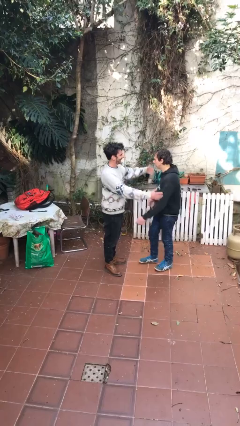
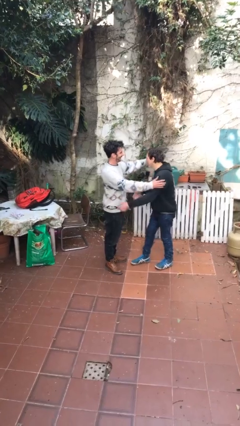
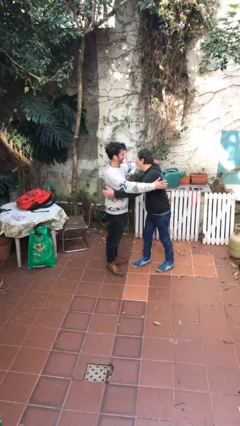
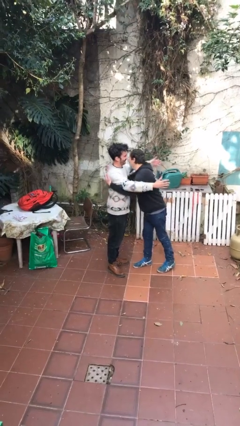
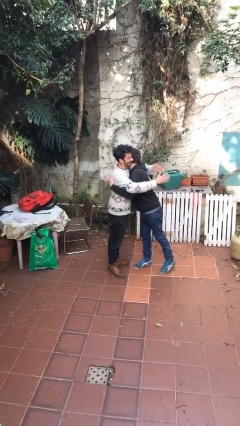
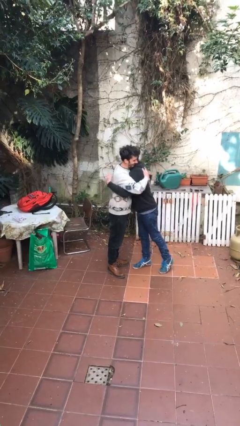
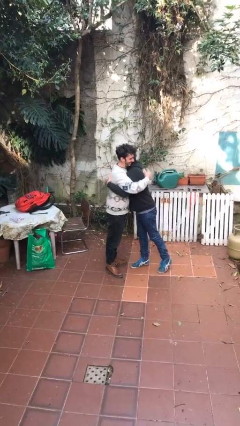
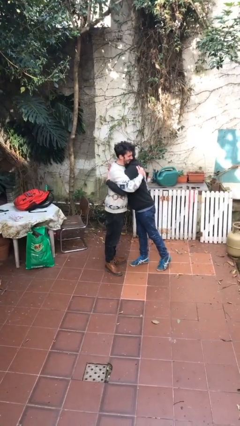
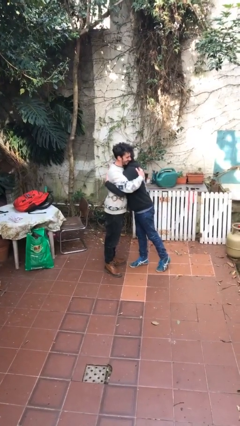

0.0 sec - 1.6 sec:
person embraces person

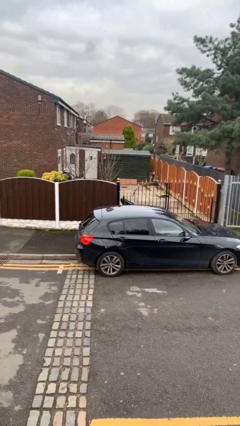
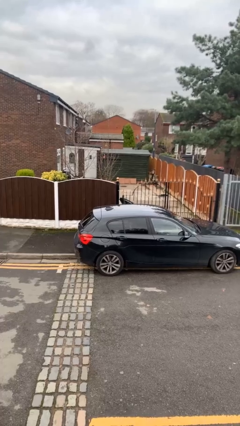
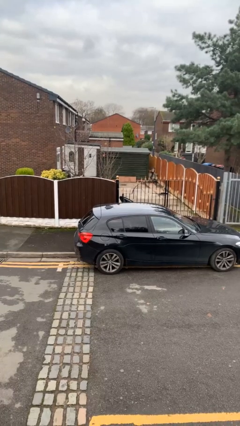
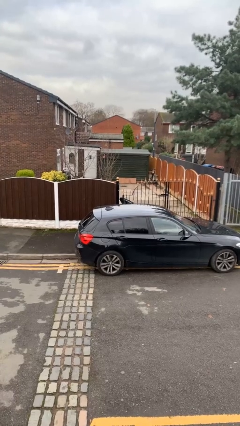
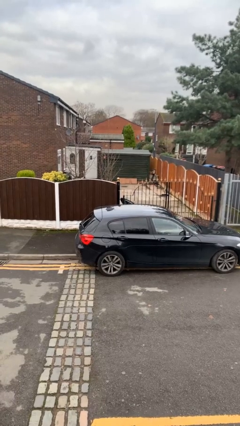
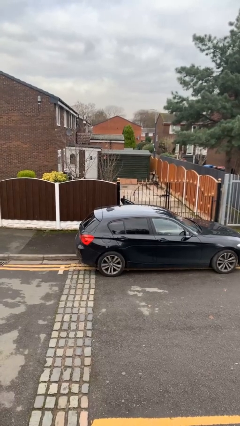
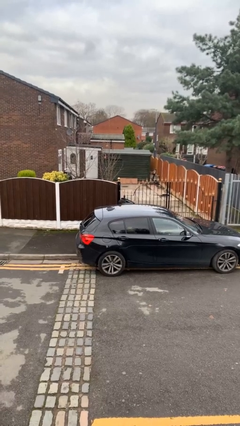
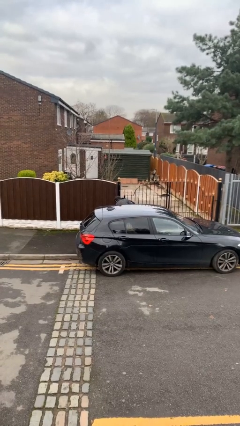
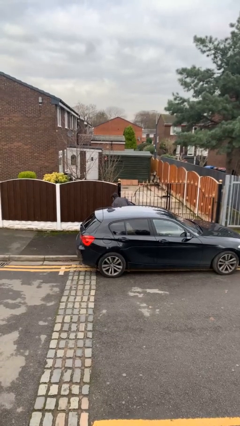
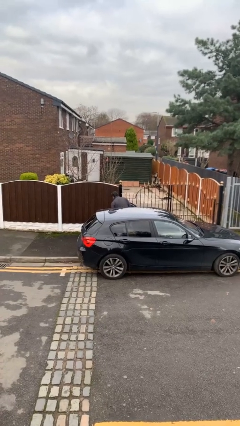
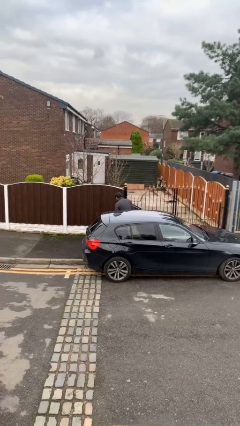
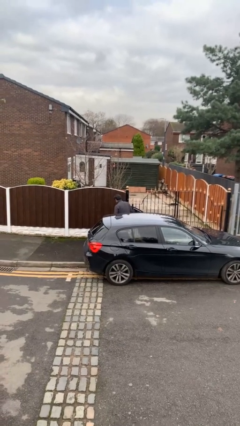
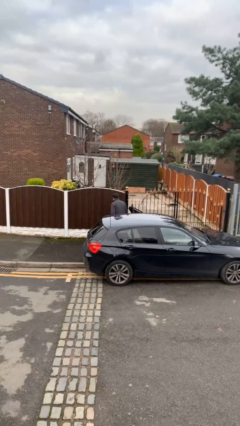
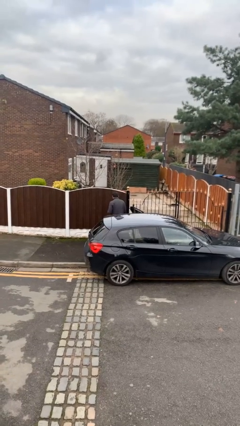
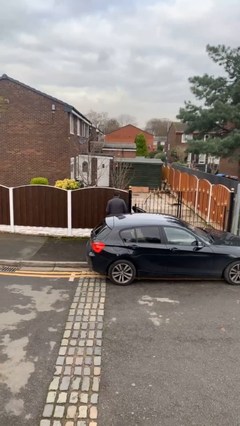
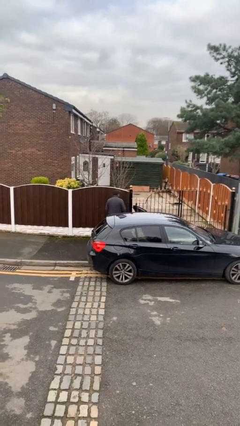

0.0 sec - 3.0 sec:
person exits car

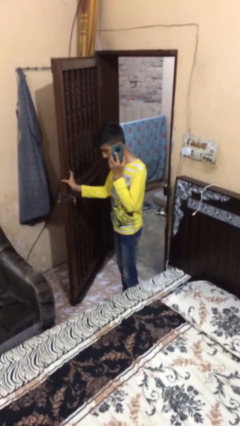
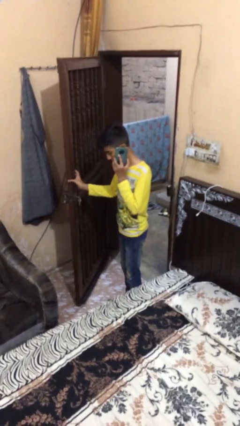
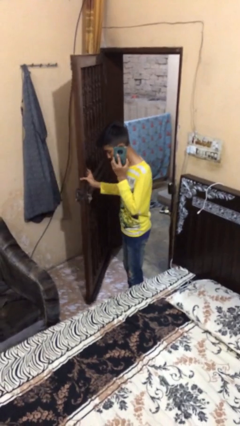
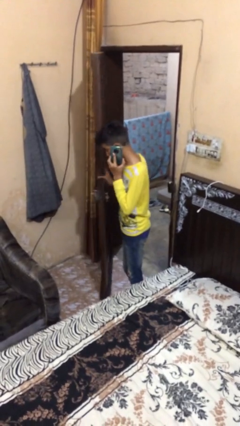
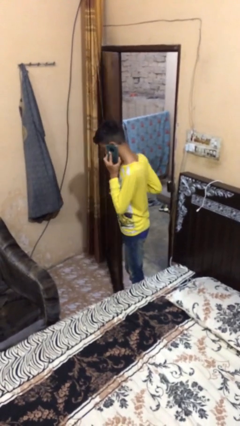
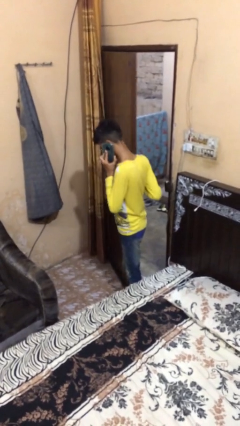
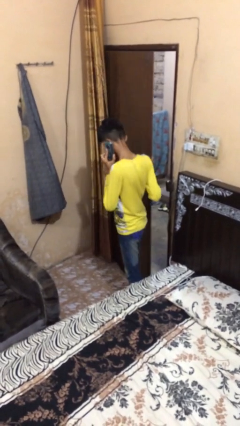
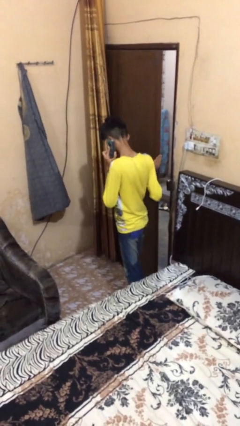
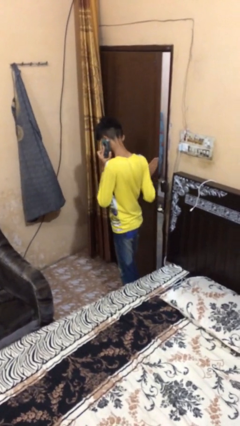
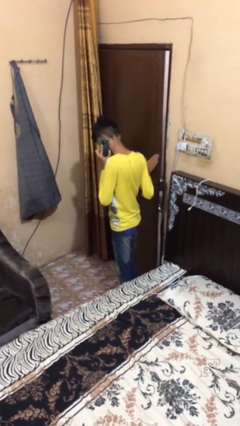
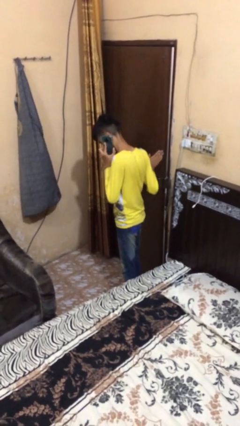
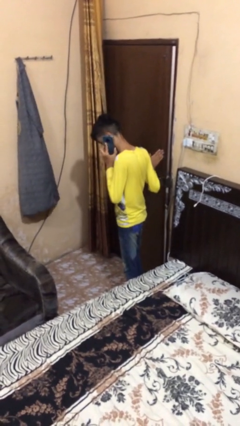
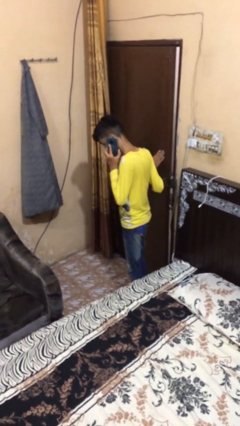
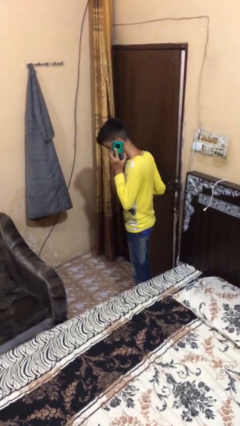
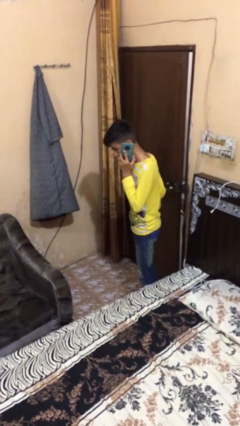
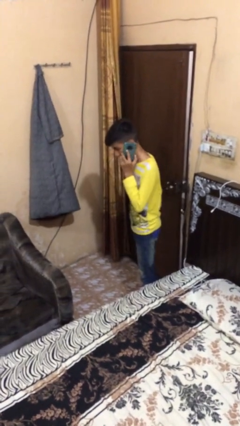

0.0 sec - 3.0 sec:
person closes facility door

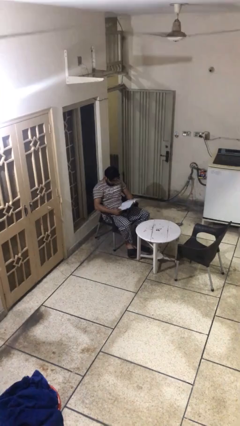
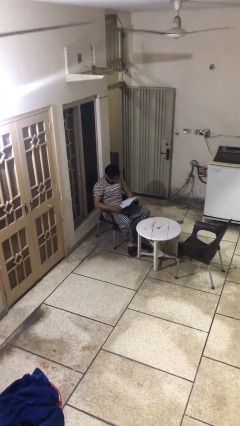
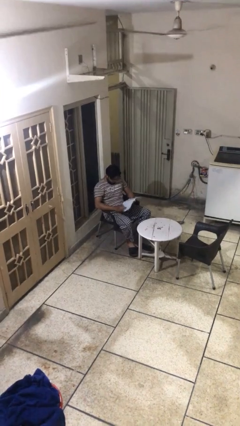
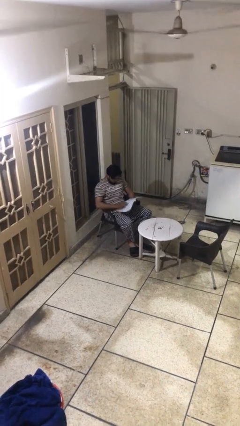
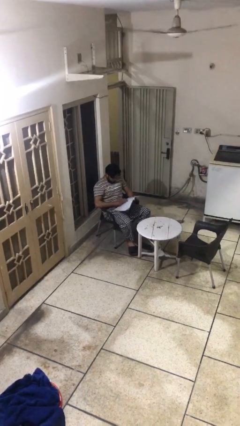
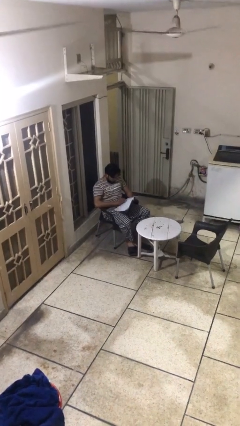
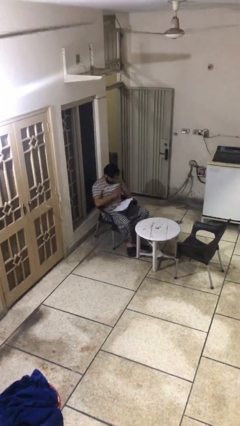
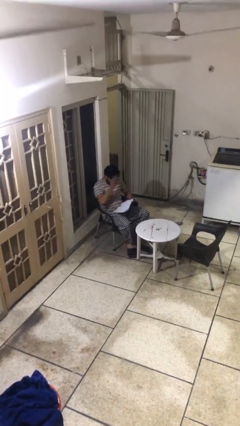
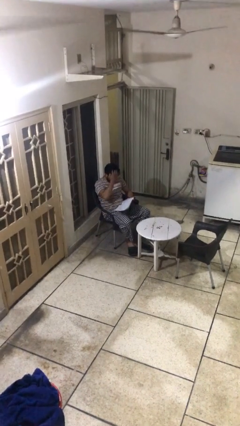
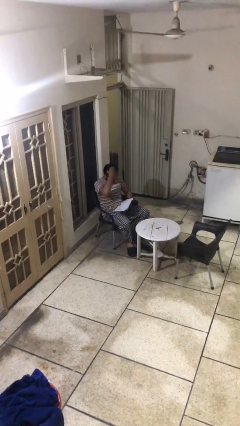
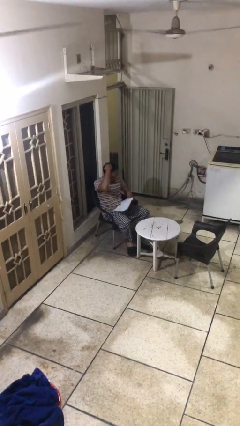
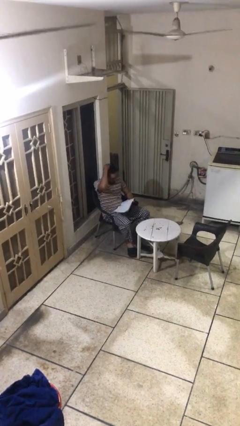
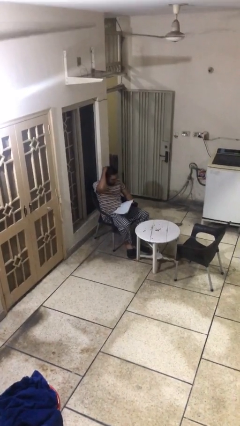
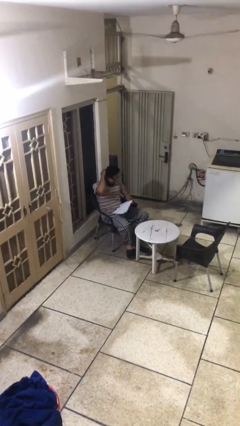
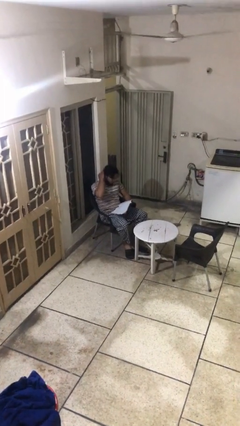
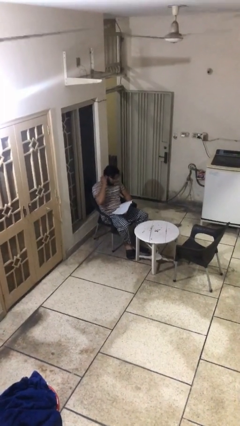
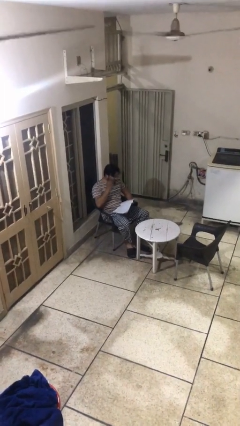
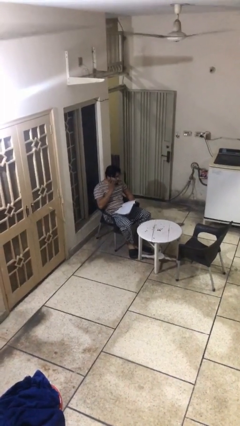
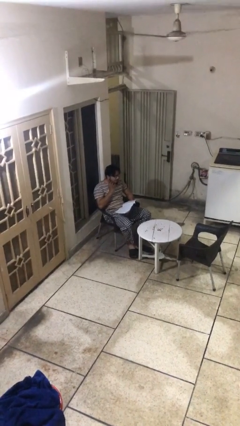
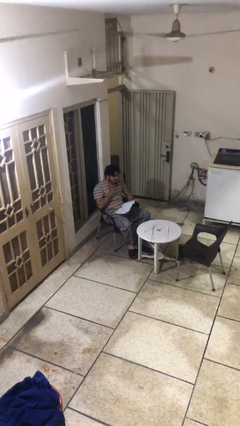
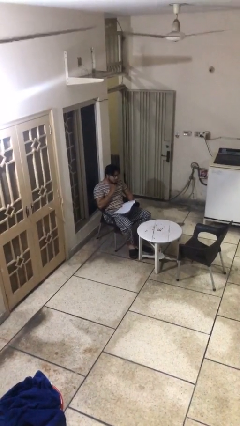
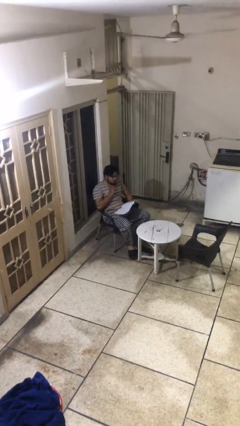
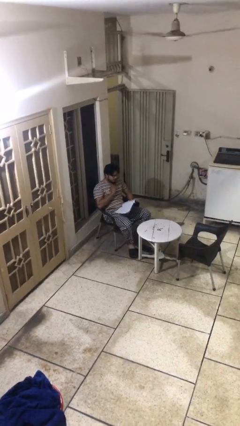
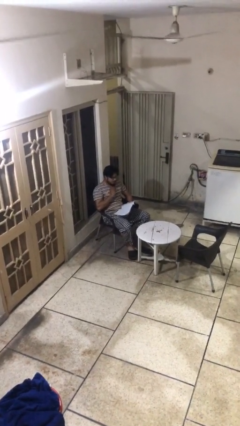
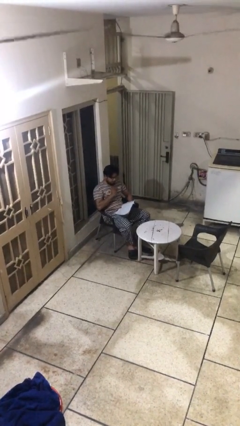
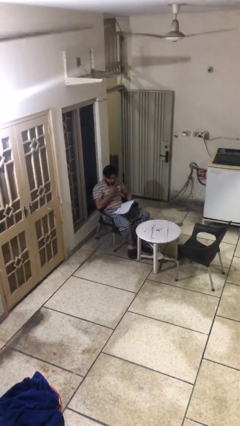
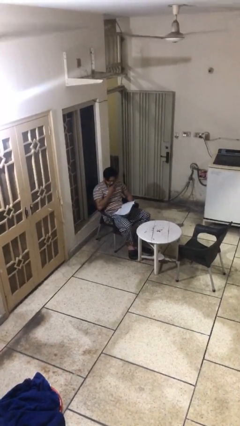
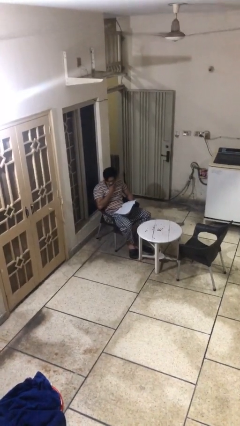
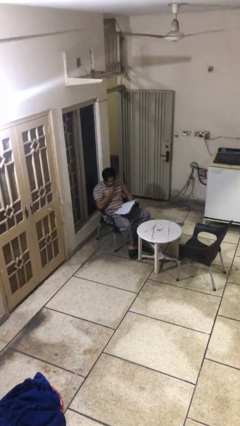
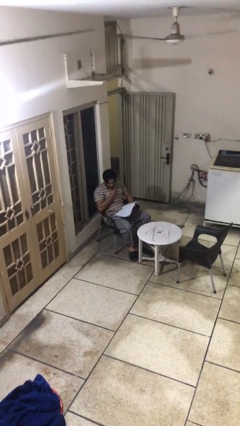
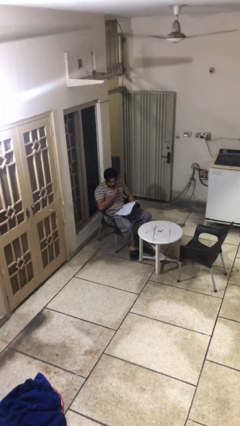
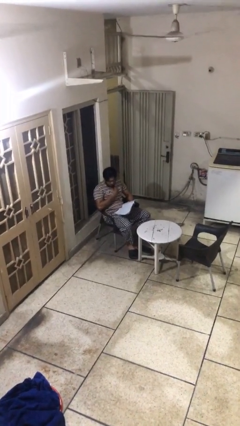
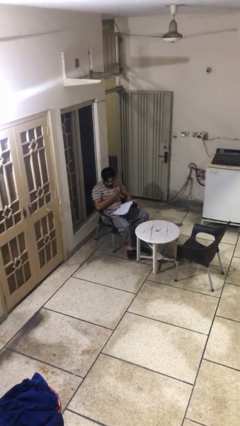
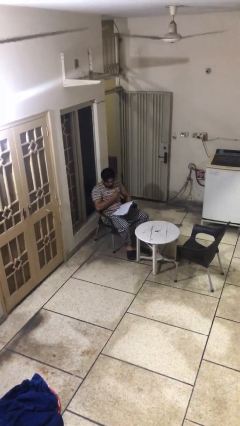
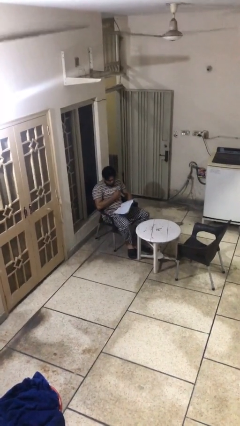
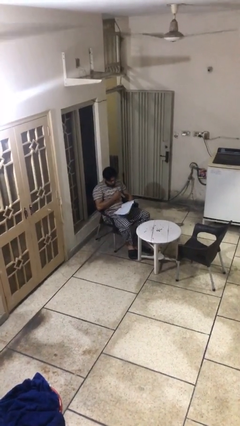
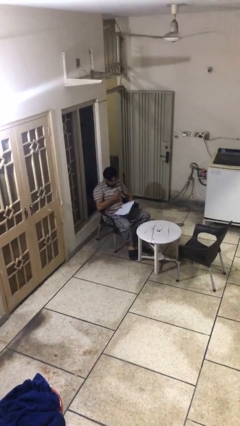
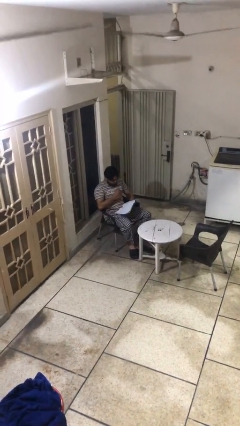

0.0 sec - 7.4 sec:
person reads document

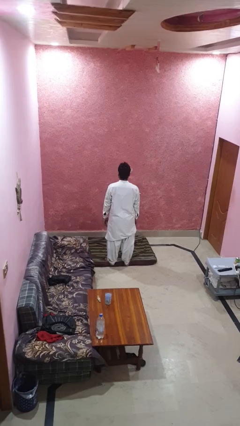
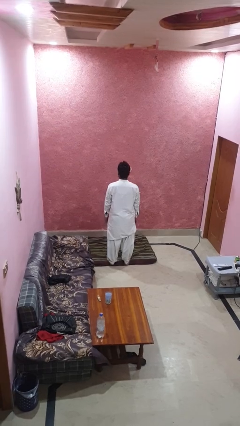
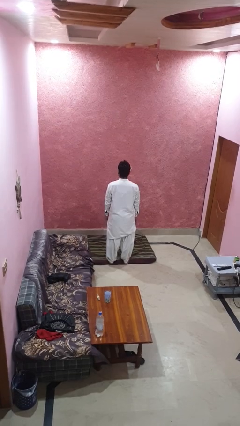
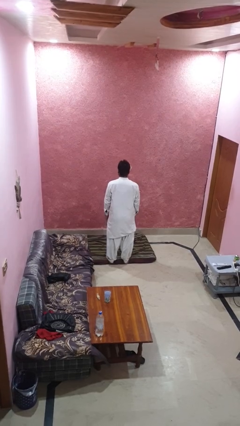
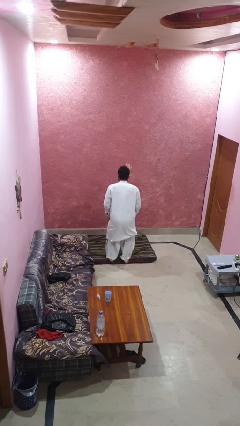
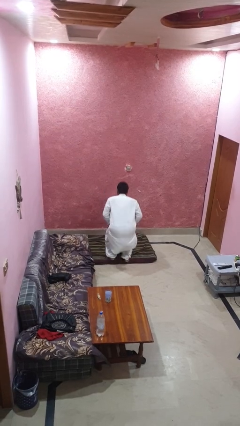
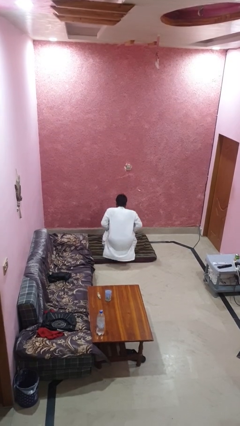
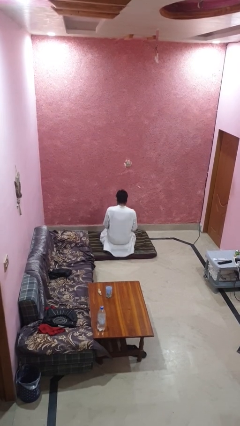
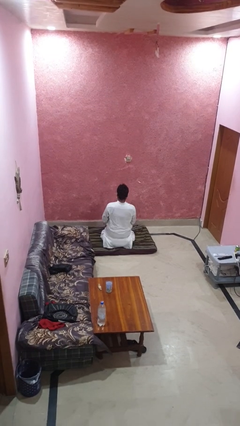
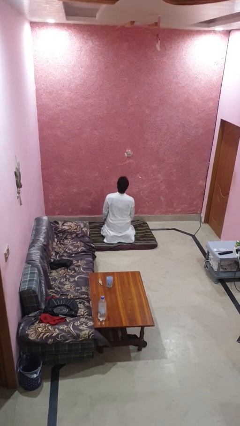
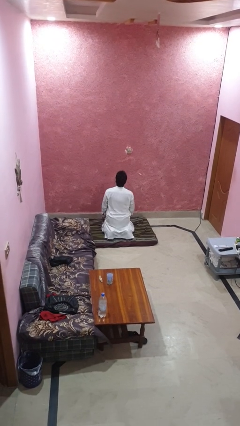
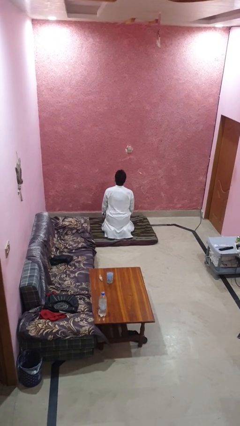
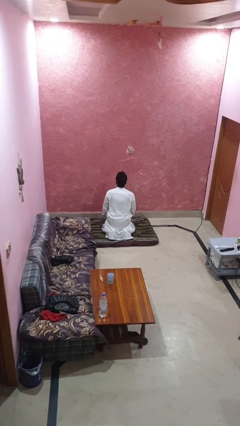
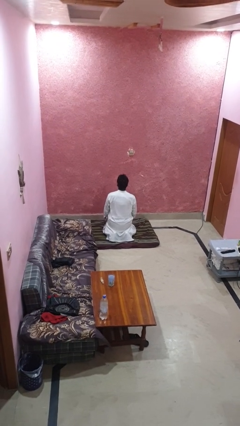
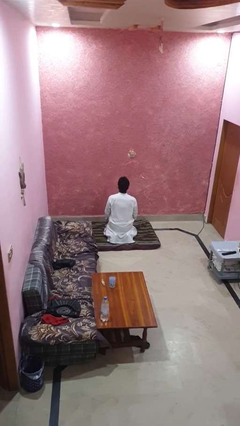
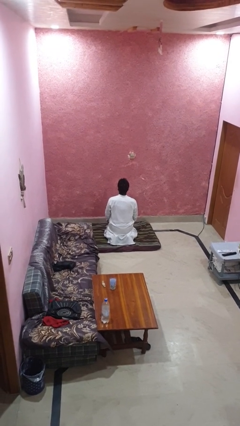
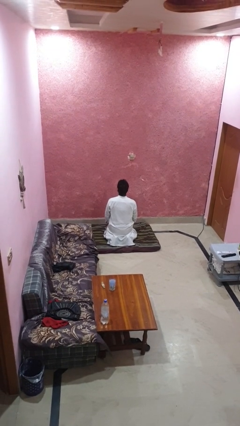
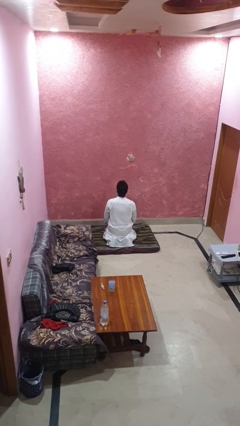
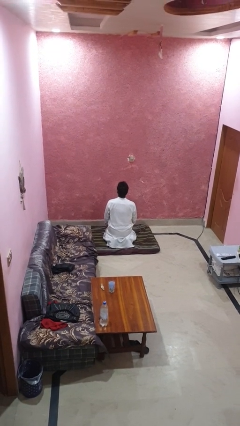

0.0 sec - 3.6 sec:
person kneels
